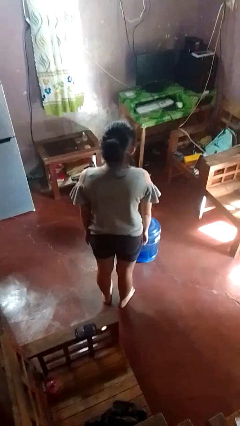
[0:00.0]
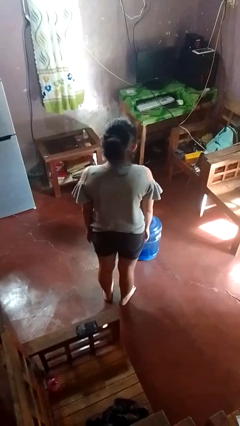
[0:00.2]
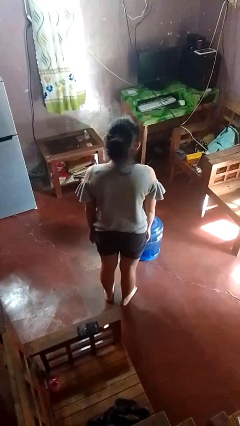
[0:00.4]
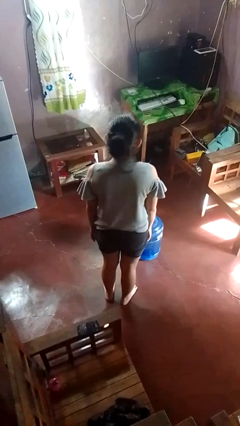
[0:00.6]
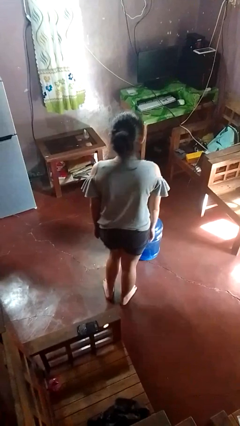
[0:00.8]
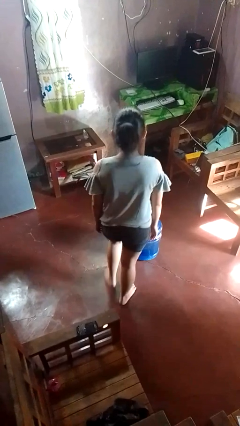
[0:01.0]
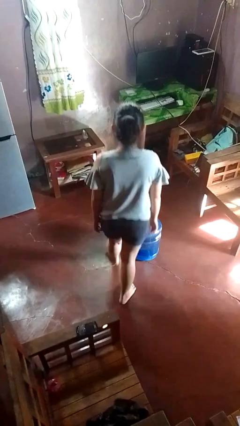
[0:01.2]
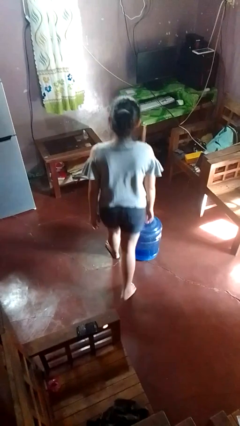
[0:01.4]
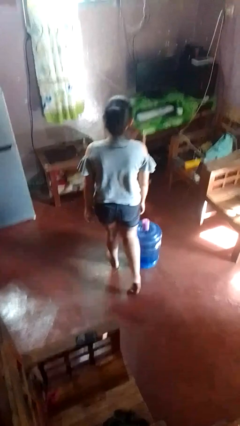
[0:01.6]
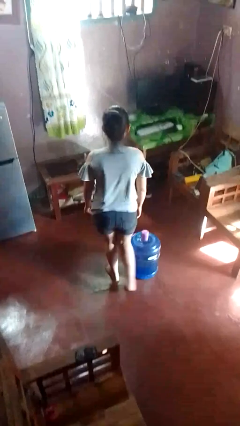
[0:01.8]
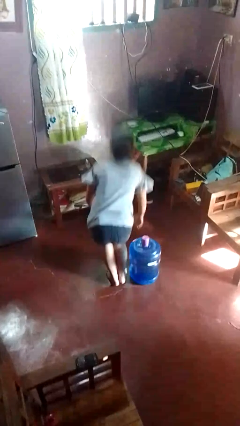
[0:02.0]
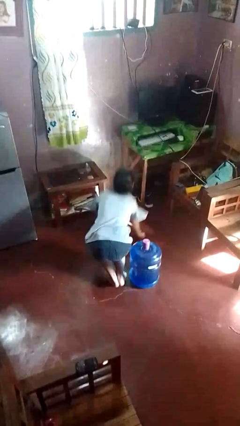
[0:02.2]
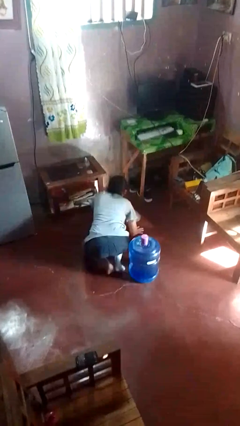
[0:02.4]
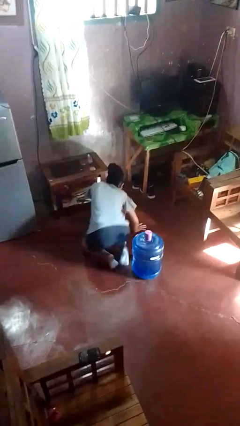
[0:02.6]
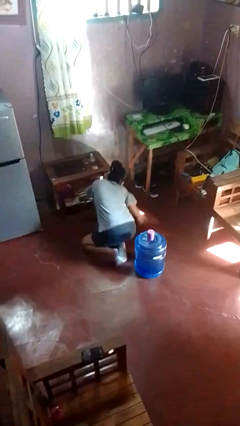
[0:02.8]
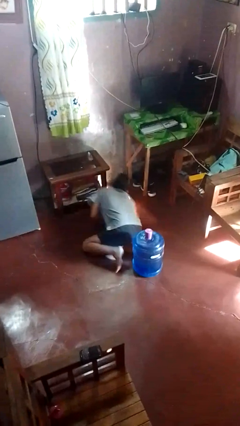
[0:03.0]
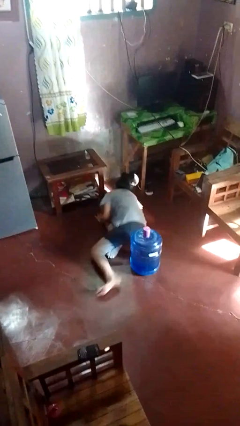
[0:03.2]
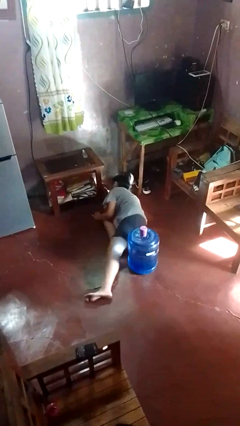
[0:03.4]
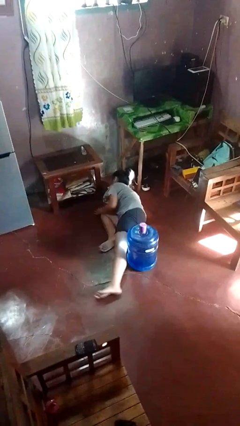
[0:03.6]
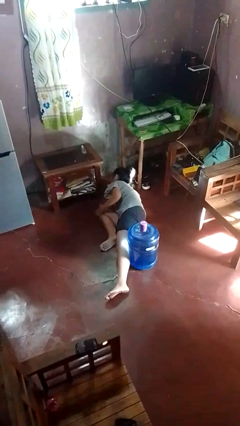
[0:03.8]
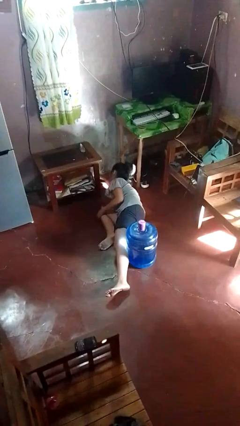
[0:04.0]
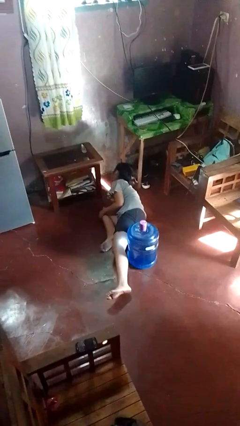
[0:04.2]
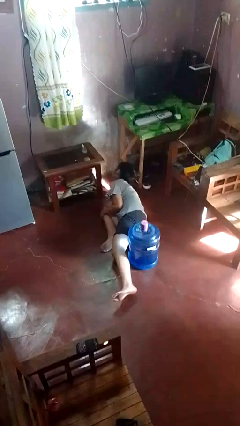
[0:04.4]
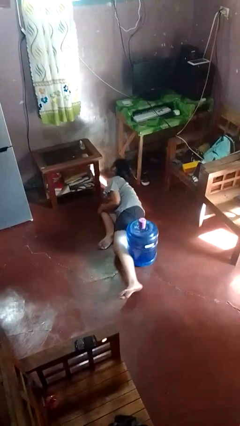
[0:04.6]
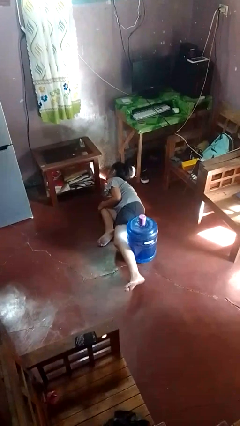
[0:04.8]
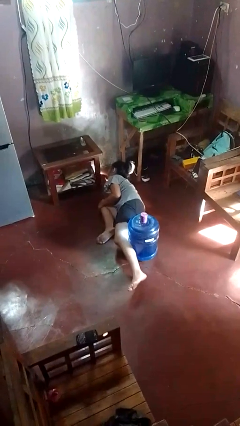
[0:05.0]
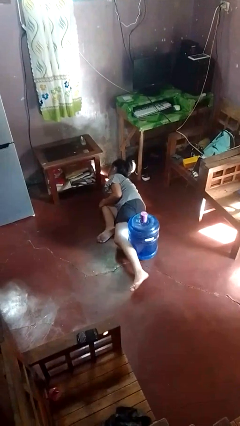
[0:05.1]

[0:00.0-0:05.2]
person trips on object on floor

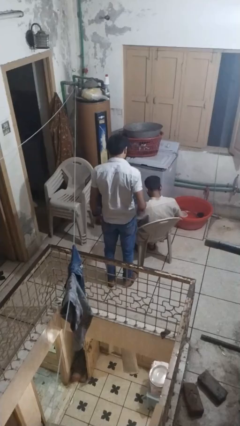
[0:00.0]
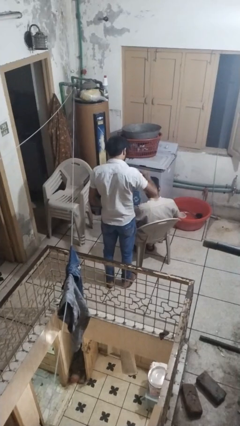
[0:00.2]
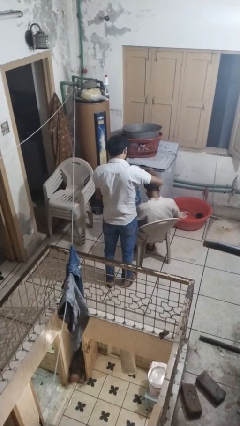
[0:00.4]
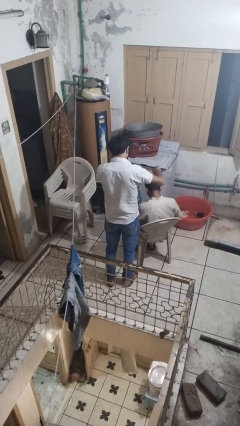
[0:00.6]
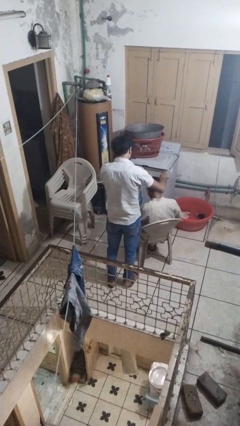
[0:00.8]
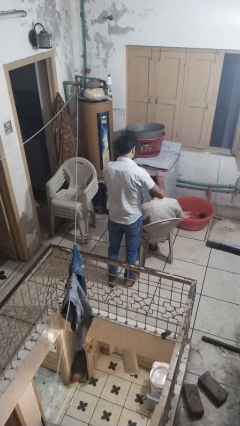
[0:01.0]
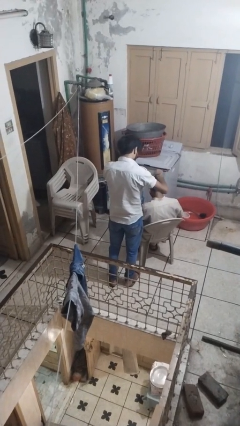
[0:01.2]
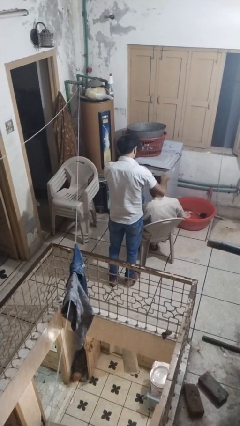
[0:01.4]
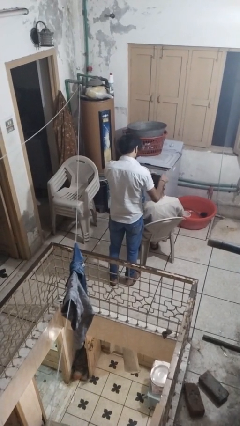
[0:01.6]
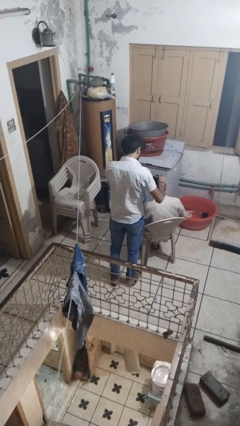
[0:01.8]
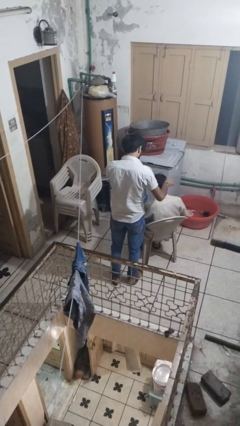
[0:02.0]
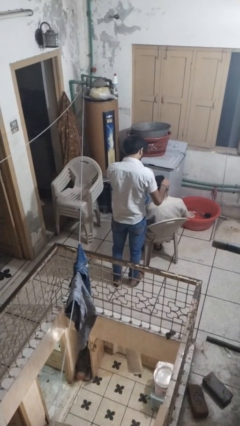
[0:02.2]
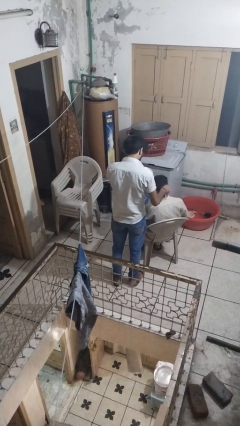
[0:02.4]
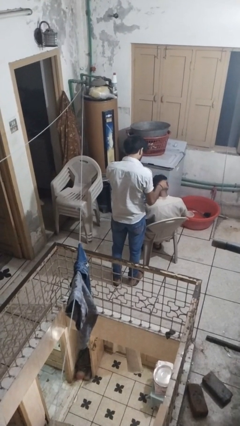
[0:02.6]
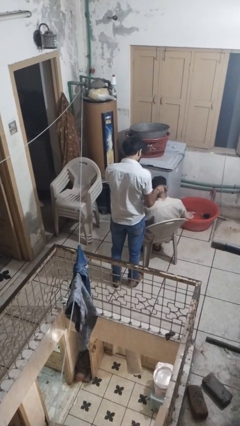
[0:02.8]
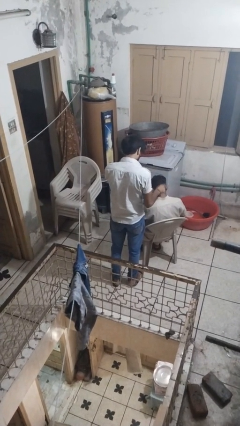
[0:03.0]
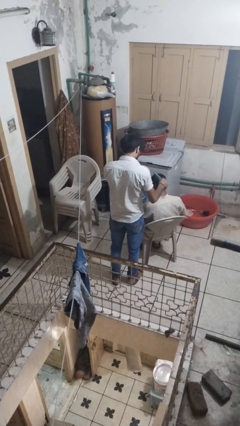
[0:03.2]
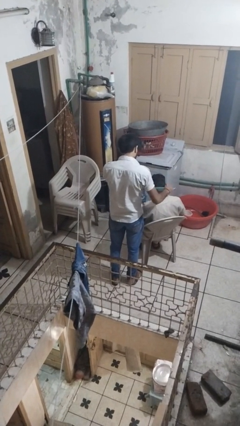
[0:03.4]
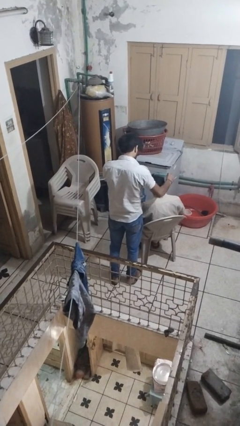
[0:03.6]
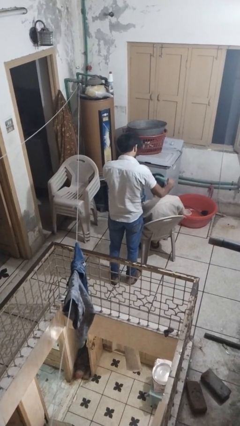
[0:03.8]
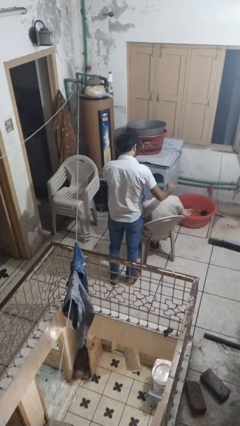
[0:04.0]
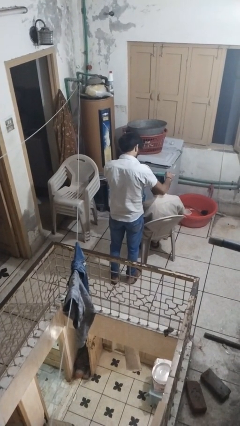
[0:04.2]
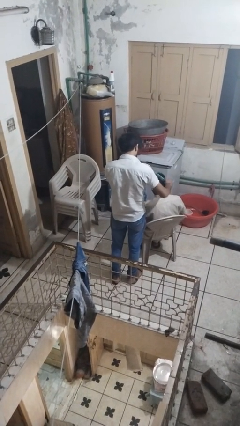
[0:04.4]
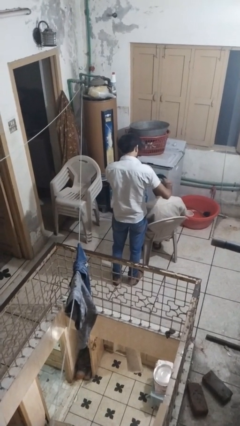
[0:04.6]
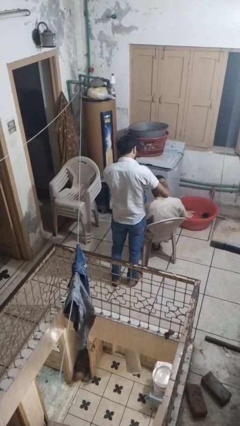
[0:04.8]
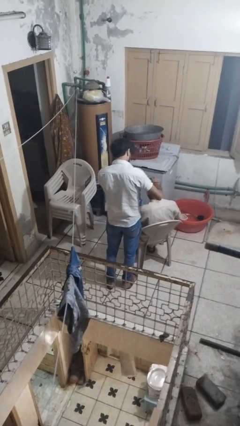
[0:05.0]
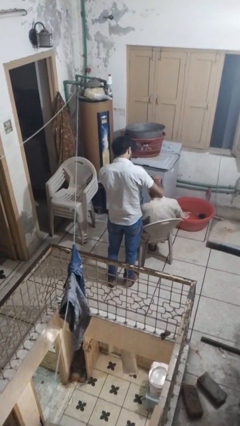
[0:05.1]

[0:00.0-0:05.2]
person brushes hair of person

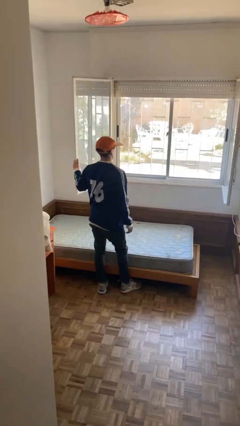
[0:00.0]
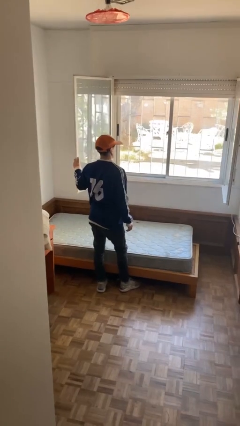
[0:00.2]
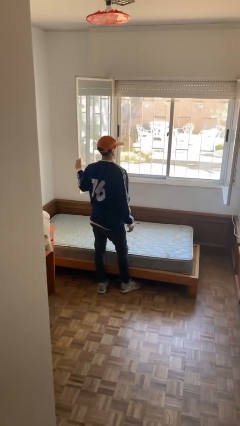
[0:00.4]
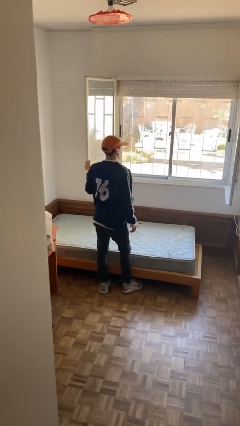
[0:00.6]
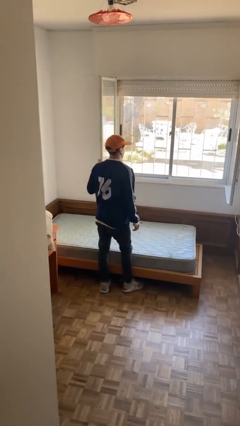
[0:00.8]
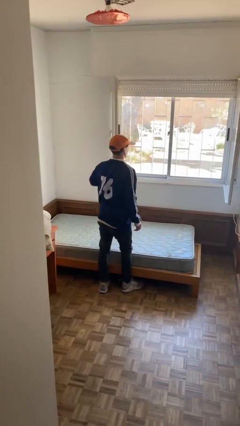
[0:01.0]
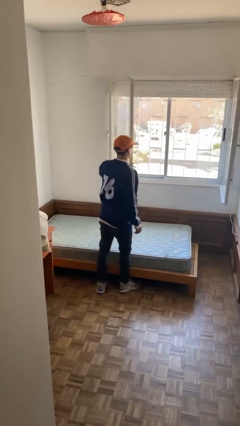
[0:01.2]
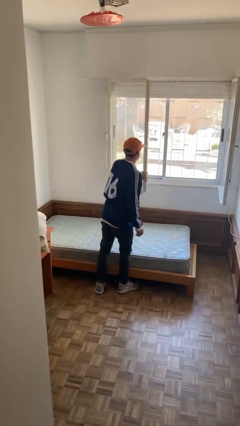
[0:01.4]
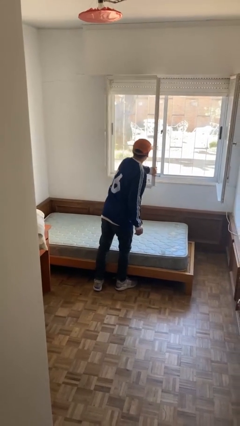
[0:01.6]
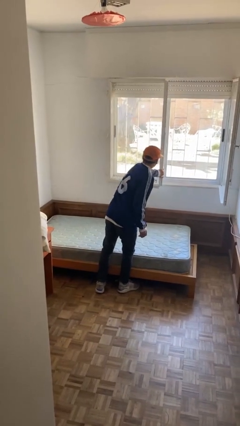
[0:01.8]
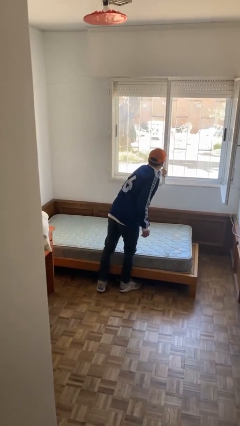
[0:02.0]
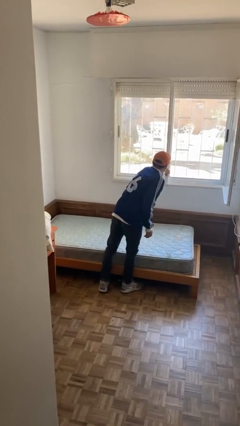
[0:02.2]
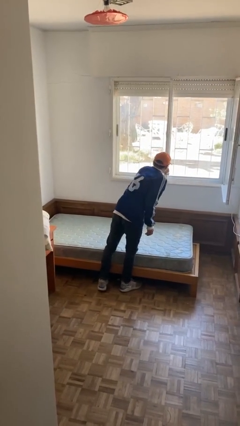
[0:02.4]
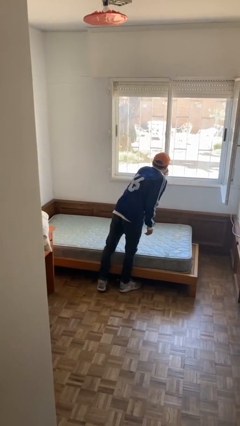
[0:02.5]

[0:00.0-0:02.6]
person closes home window

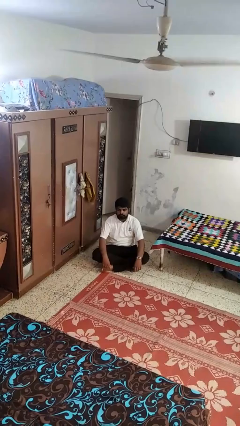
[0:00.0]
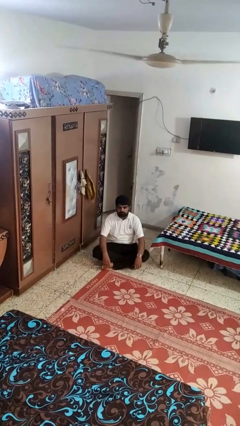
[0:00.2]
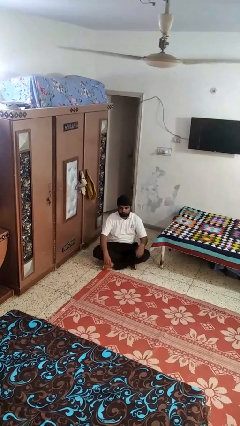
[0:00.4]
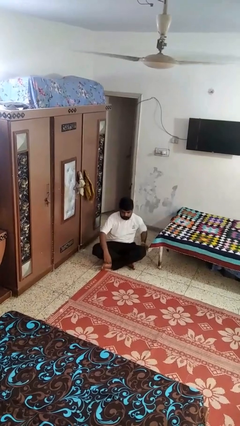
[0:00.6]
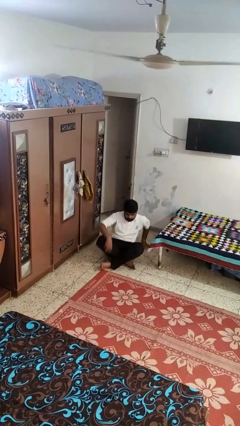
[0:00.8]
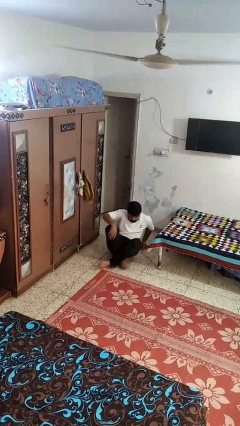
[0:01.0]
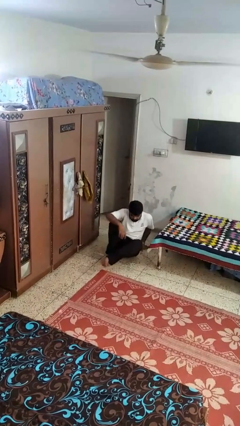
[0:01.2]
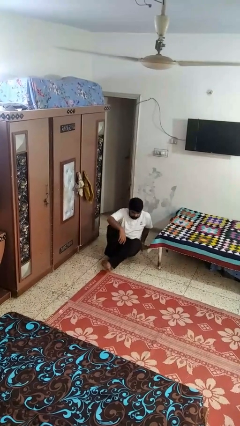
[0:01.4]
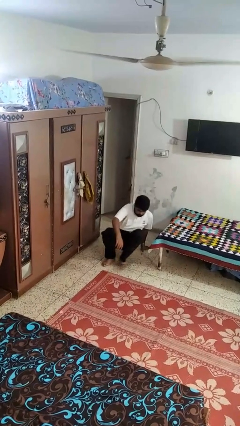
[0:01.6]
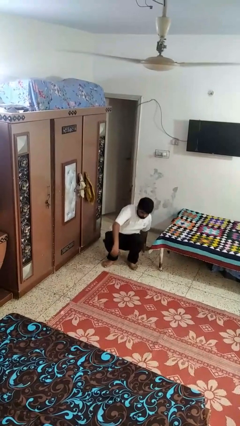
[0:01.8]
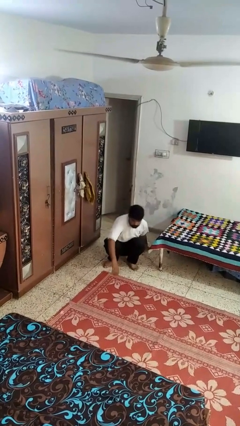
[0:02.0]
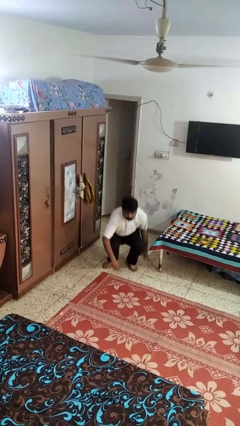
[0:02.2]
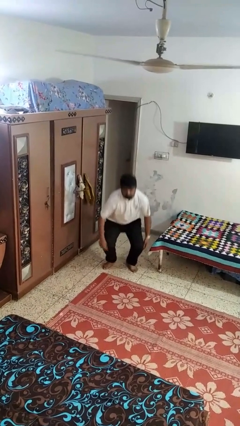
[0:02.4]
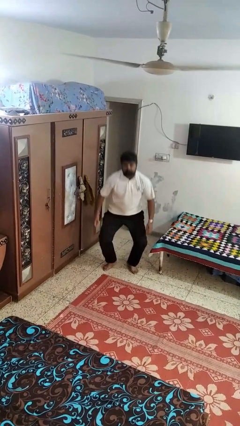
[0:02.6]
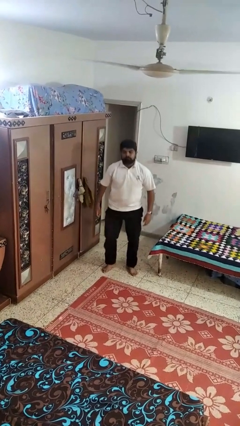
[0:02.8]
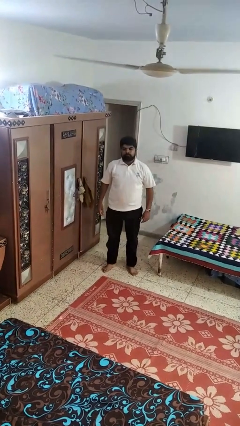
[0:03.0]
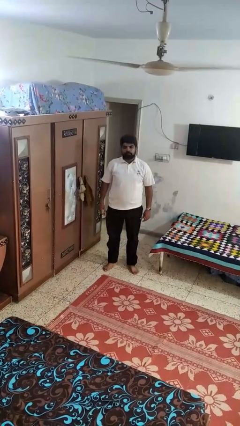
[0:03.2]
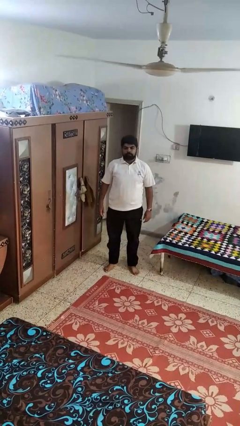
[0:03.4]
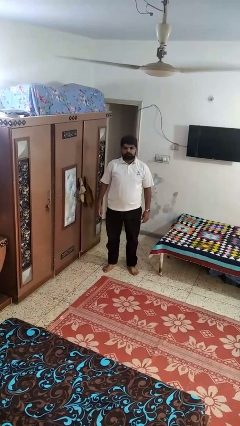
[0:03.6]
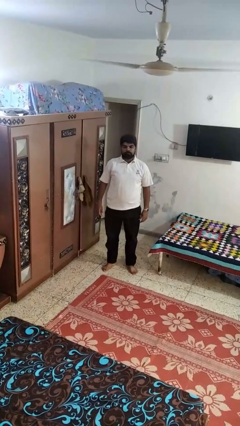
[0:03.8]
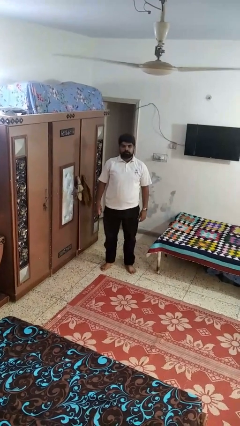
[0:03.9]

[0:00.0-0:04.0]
person stands up from floor

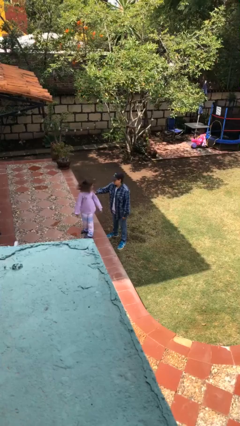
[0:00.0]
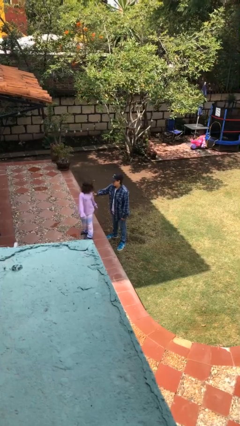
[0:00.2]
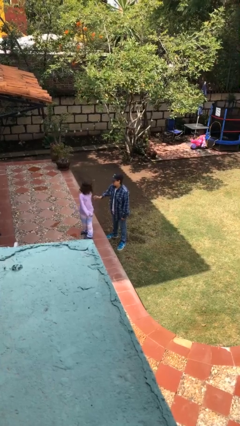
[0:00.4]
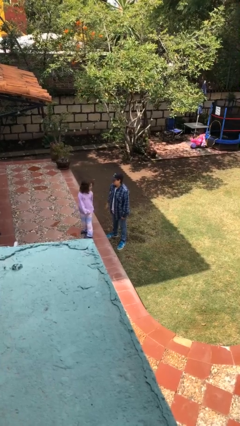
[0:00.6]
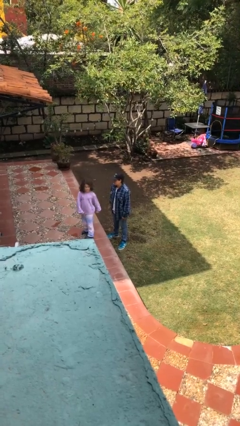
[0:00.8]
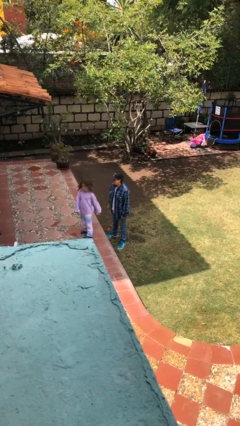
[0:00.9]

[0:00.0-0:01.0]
person spins person around
